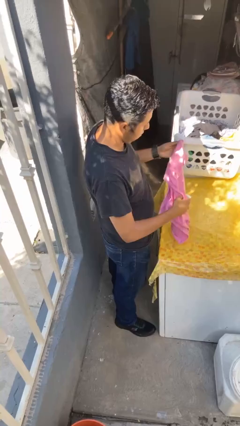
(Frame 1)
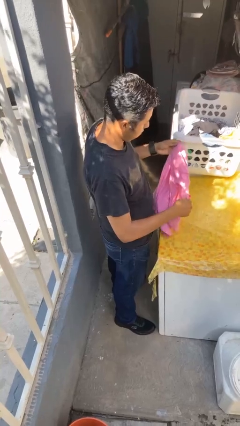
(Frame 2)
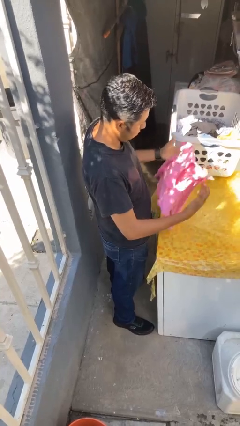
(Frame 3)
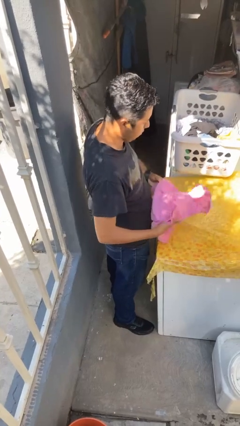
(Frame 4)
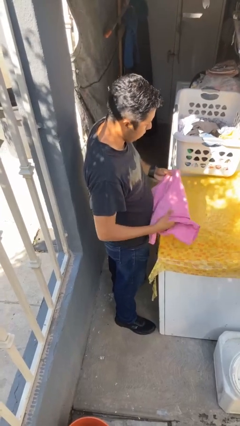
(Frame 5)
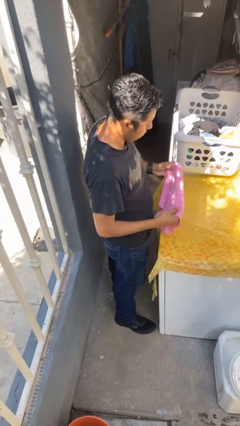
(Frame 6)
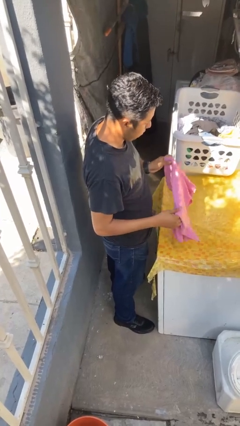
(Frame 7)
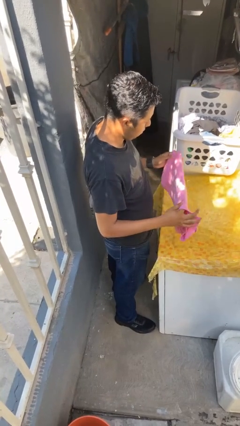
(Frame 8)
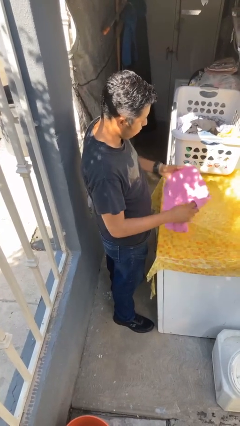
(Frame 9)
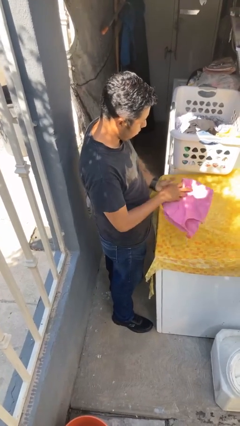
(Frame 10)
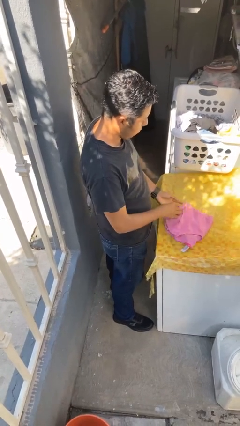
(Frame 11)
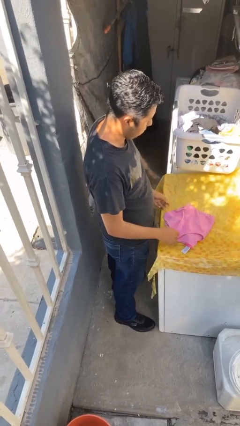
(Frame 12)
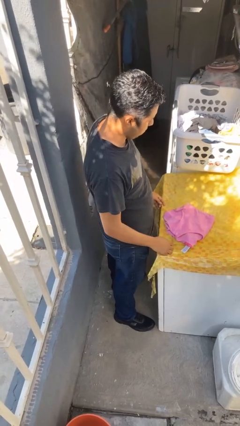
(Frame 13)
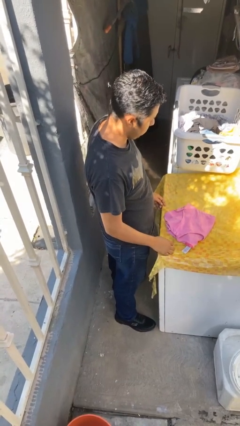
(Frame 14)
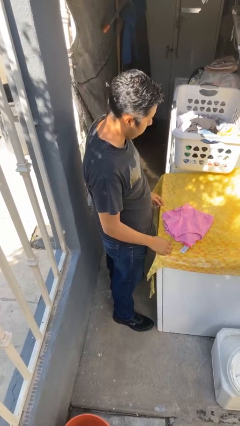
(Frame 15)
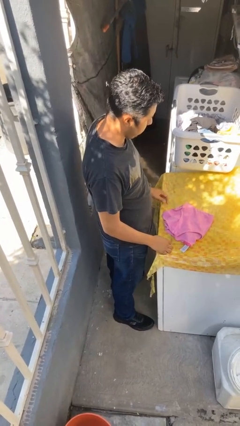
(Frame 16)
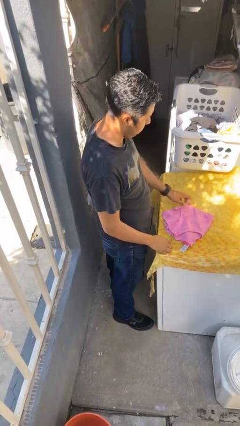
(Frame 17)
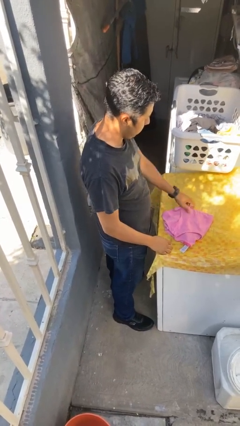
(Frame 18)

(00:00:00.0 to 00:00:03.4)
person folds shirt

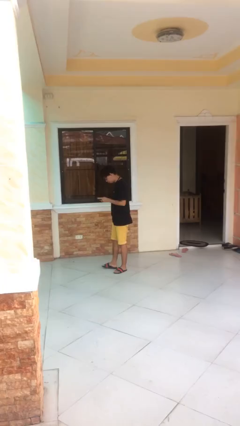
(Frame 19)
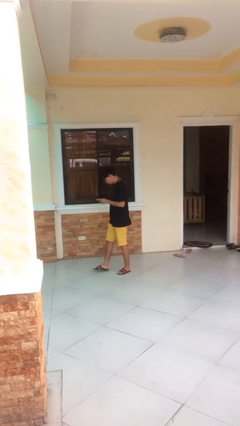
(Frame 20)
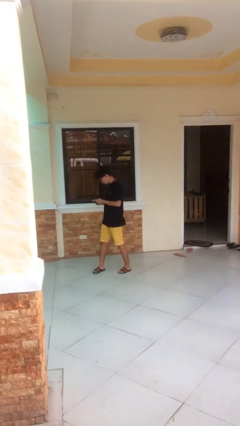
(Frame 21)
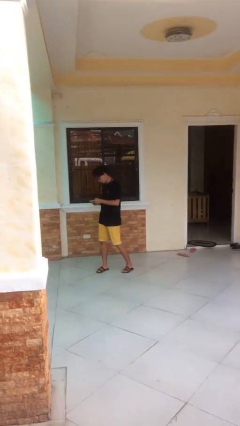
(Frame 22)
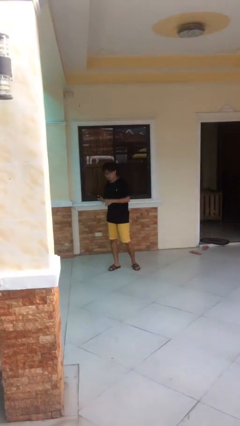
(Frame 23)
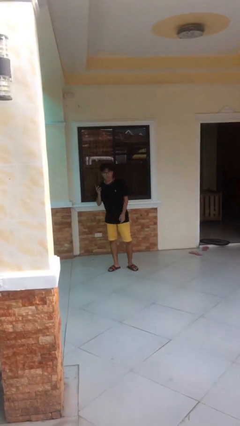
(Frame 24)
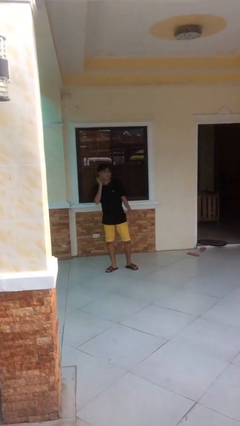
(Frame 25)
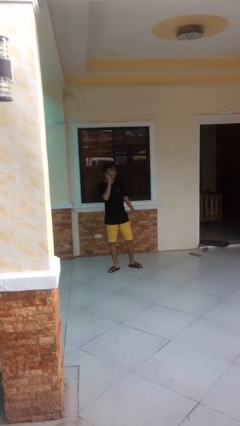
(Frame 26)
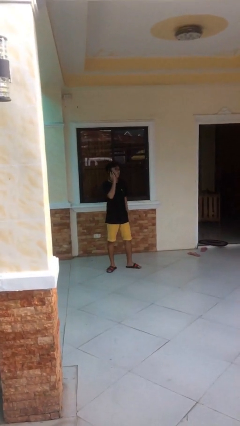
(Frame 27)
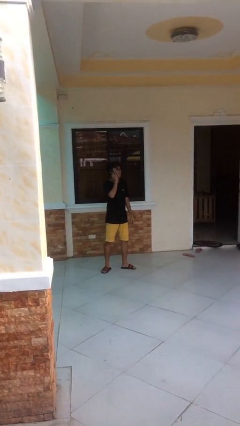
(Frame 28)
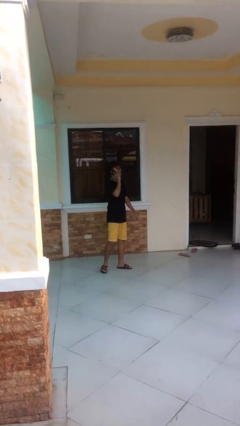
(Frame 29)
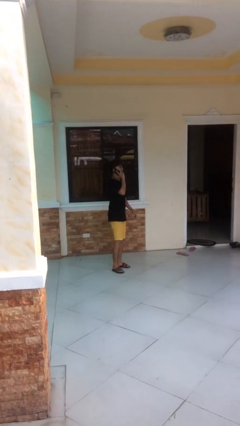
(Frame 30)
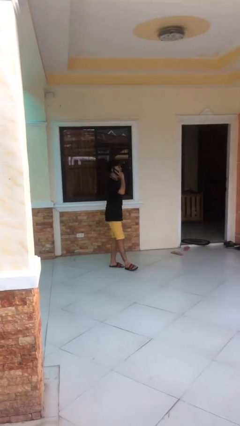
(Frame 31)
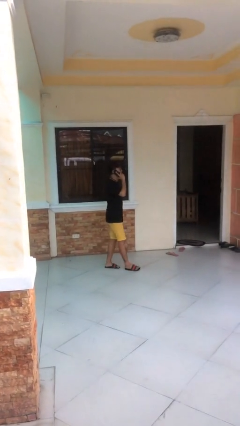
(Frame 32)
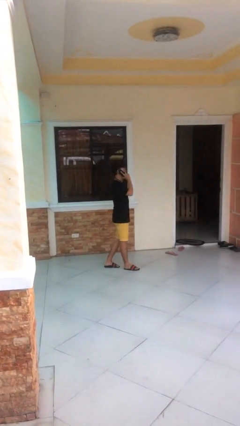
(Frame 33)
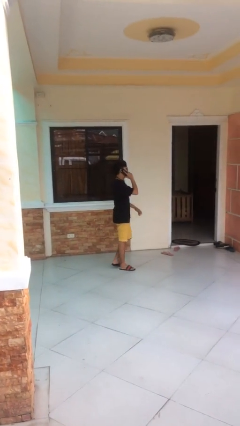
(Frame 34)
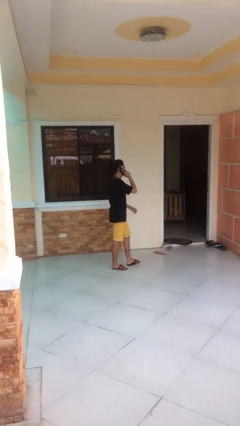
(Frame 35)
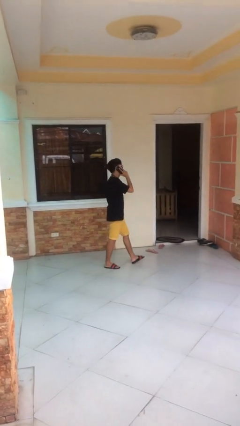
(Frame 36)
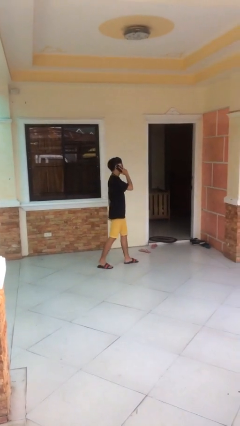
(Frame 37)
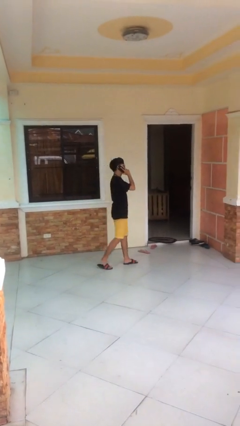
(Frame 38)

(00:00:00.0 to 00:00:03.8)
person talks on phone

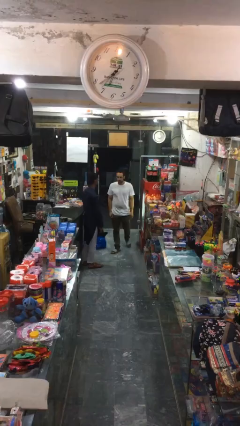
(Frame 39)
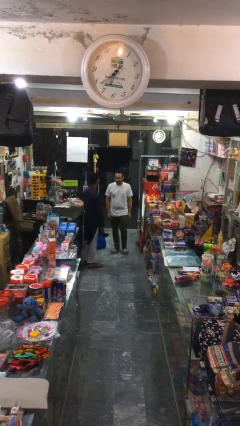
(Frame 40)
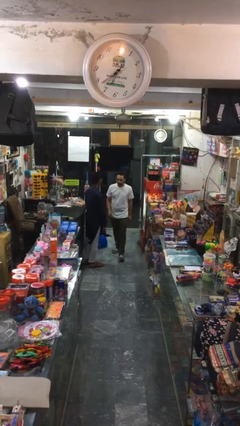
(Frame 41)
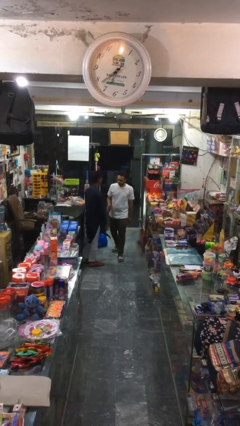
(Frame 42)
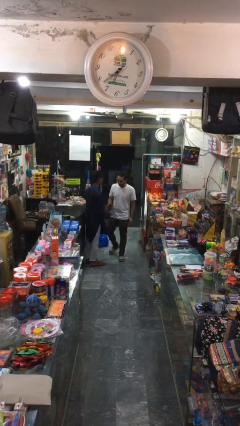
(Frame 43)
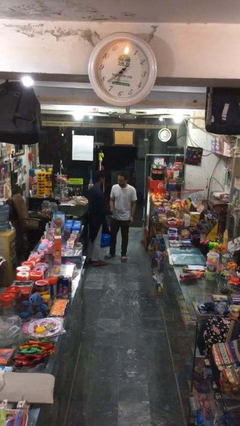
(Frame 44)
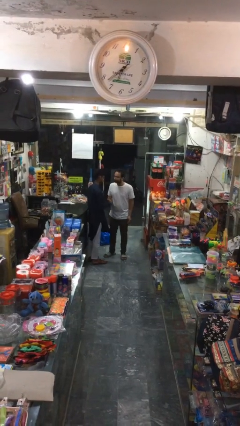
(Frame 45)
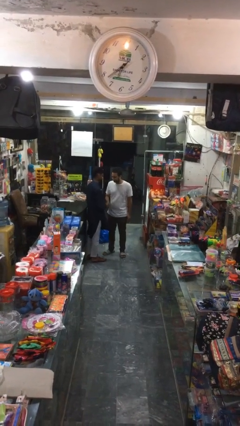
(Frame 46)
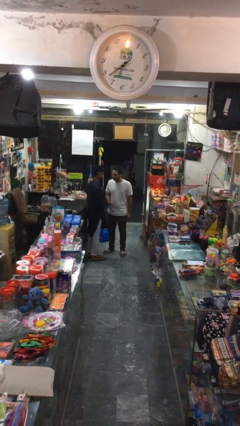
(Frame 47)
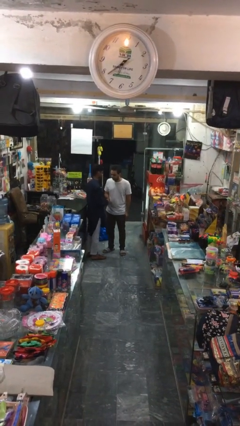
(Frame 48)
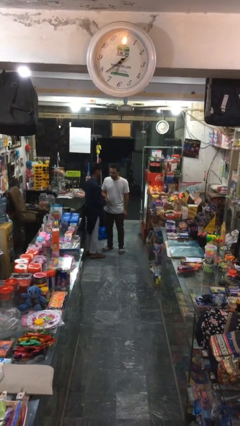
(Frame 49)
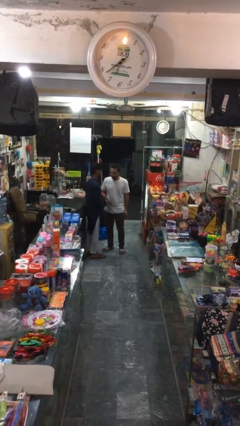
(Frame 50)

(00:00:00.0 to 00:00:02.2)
person shakes hand

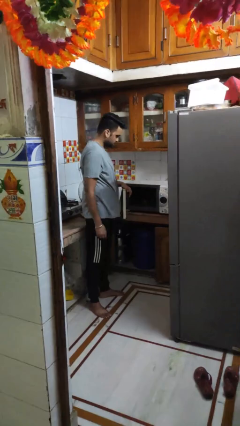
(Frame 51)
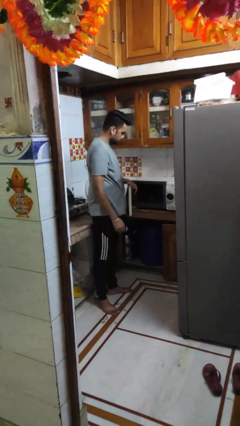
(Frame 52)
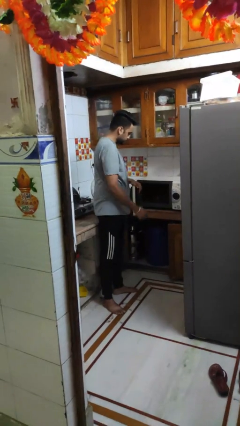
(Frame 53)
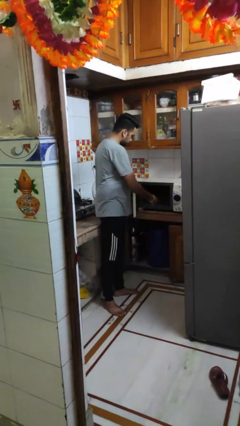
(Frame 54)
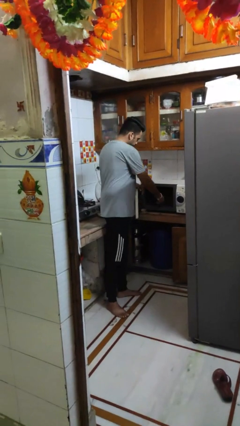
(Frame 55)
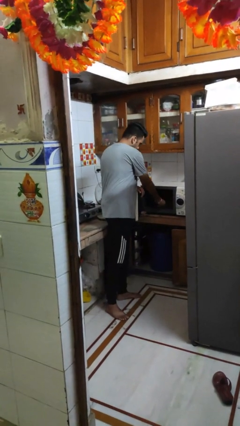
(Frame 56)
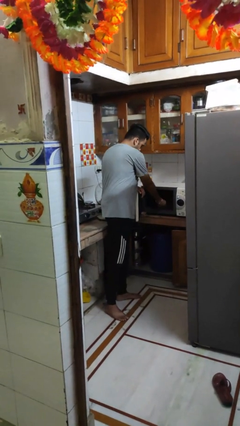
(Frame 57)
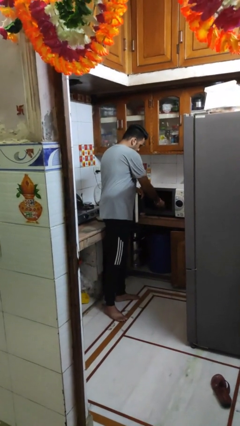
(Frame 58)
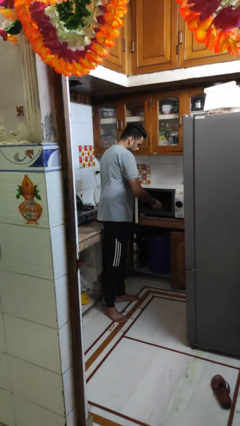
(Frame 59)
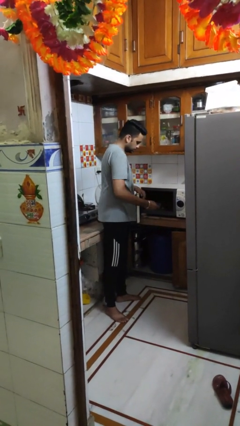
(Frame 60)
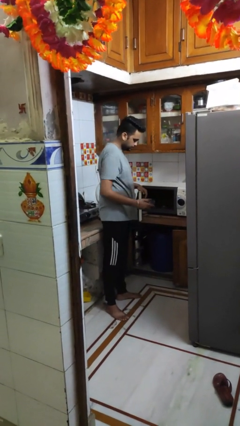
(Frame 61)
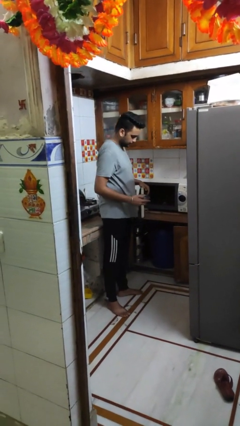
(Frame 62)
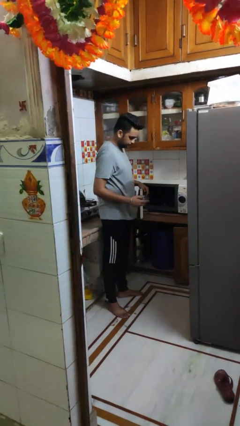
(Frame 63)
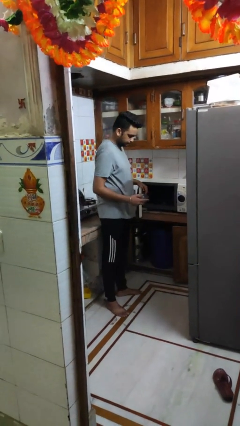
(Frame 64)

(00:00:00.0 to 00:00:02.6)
person takes object from microwave

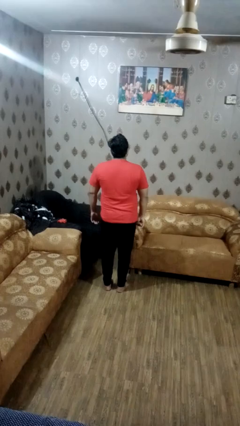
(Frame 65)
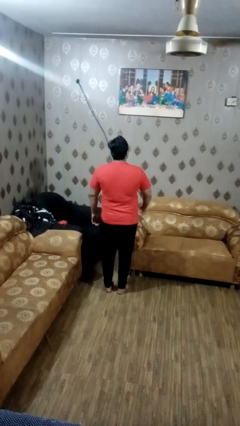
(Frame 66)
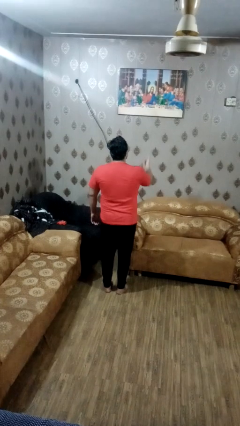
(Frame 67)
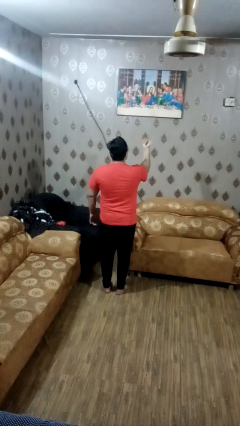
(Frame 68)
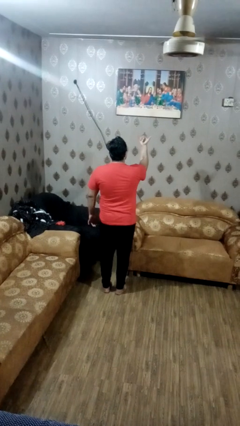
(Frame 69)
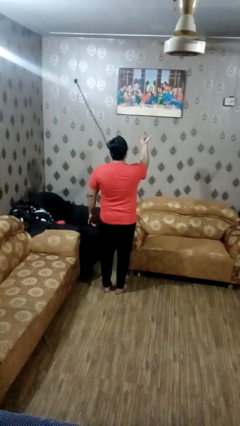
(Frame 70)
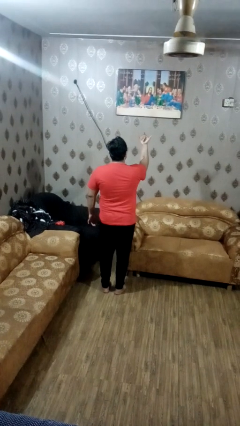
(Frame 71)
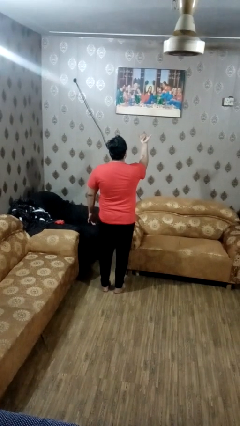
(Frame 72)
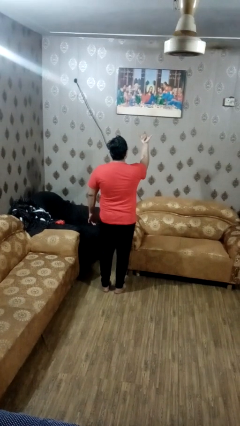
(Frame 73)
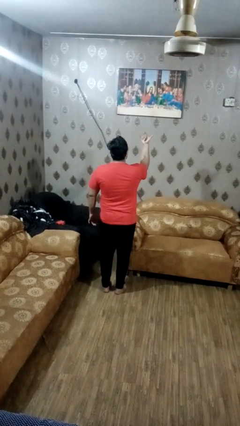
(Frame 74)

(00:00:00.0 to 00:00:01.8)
person gestures hang loose

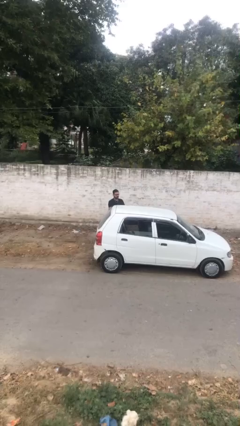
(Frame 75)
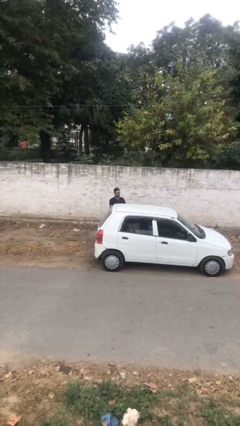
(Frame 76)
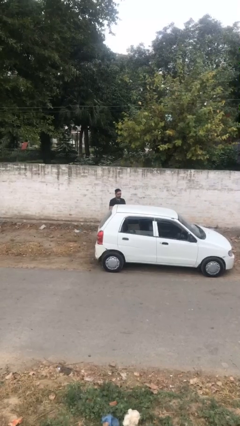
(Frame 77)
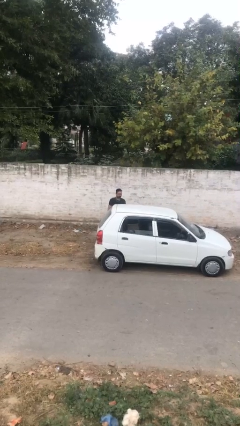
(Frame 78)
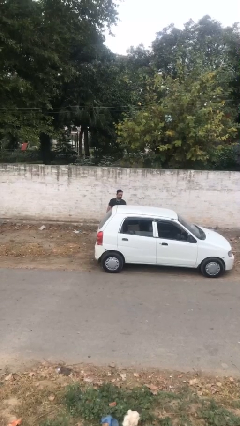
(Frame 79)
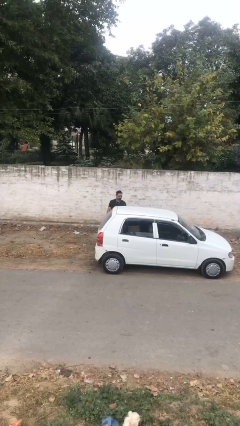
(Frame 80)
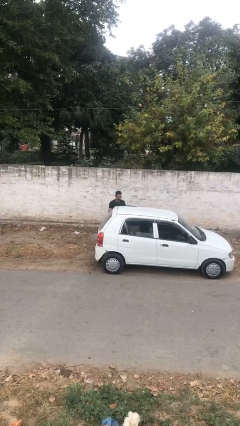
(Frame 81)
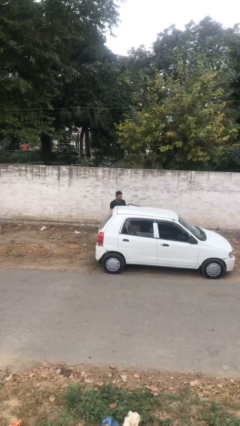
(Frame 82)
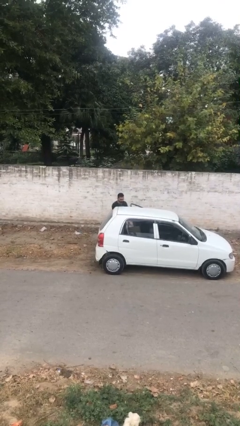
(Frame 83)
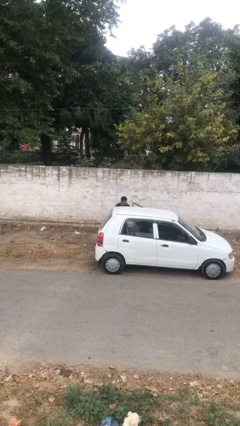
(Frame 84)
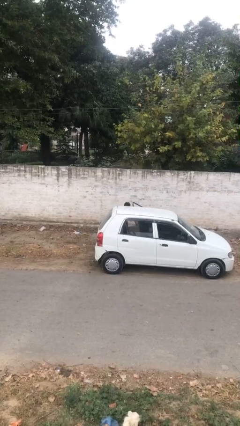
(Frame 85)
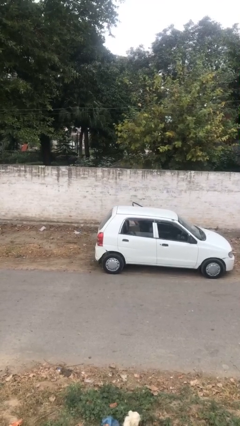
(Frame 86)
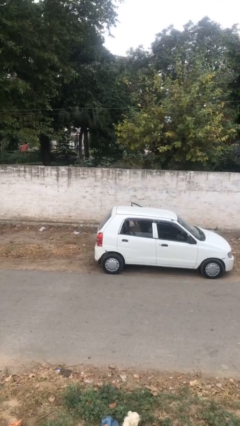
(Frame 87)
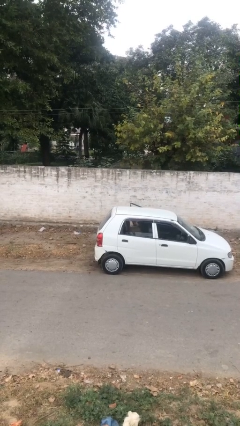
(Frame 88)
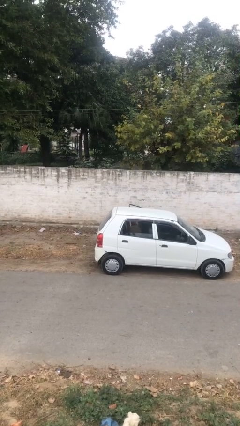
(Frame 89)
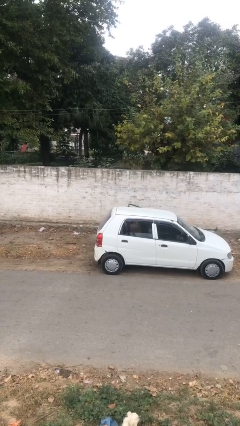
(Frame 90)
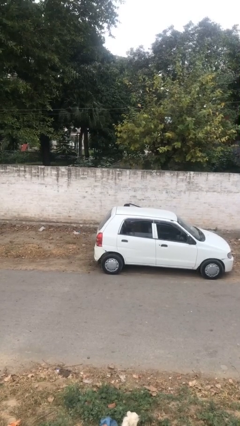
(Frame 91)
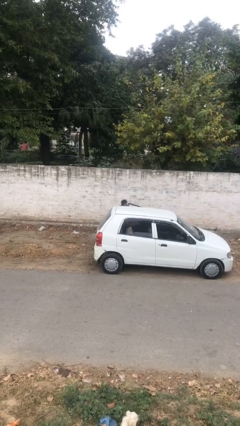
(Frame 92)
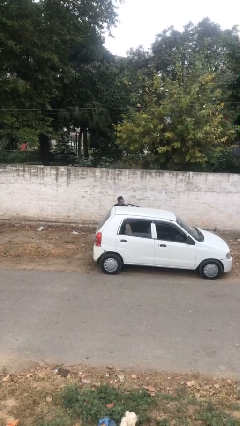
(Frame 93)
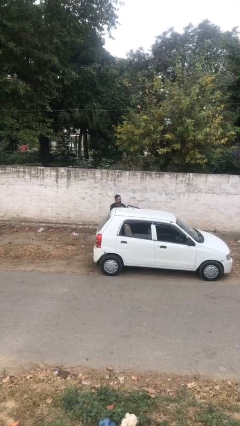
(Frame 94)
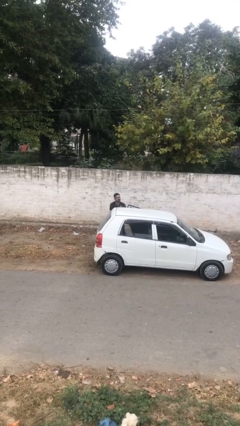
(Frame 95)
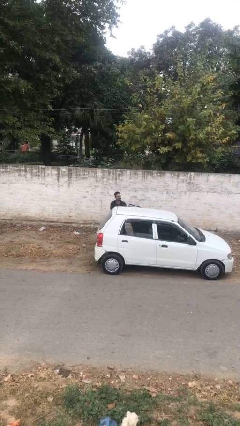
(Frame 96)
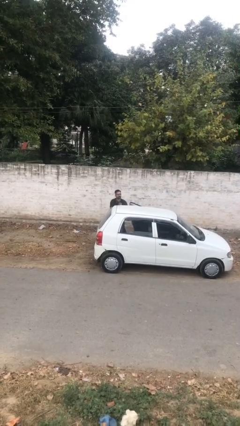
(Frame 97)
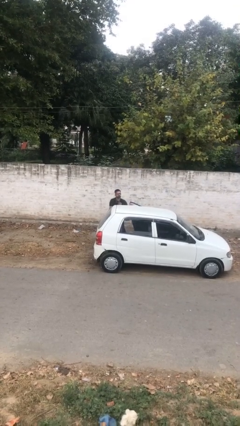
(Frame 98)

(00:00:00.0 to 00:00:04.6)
person unloads car
